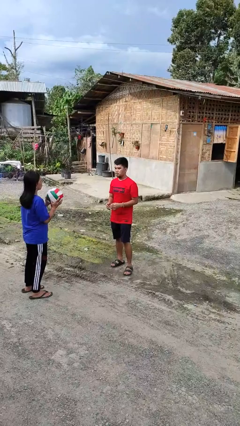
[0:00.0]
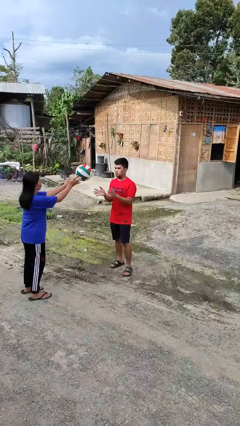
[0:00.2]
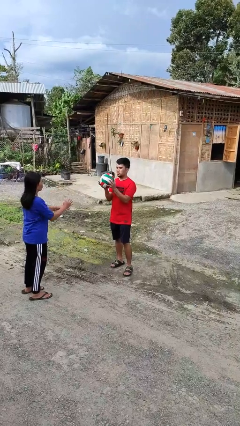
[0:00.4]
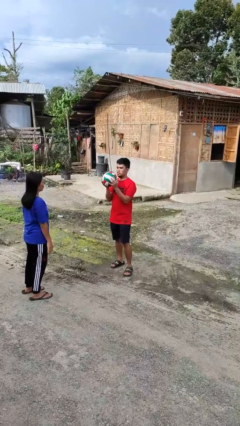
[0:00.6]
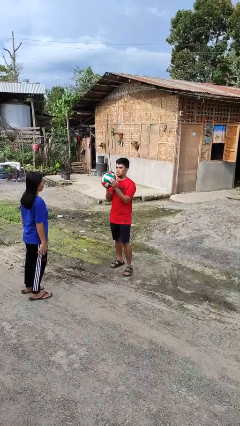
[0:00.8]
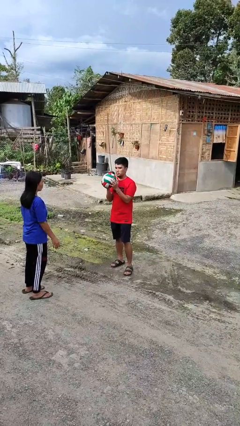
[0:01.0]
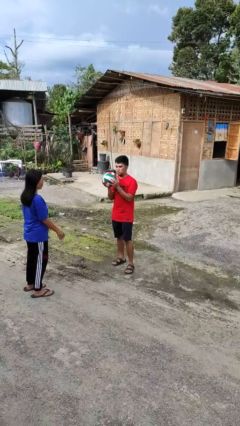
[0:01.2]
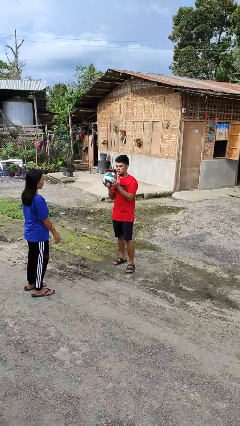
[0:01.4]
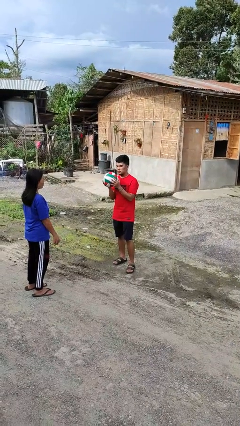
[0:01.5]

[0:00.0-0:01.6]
person catches object from person

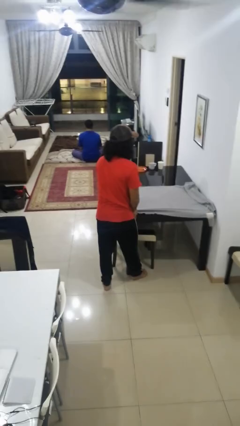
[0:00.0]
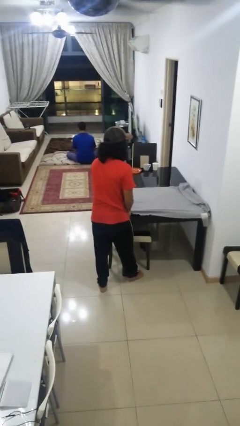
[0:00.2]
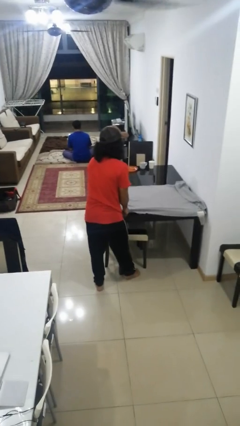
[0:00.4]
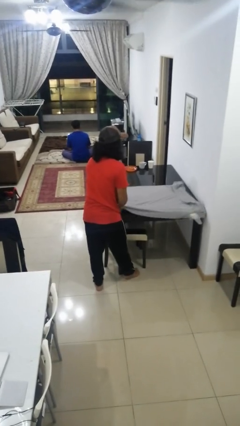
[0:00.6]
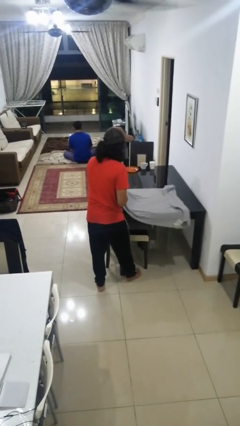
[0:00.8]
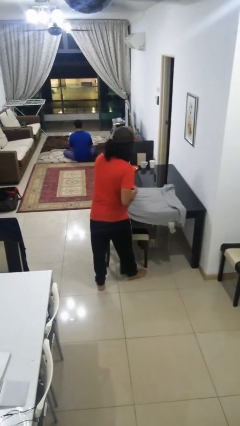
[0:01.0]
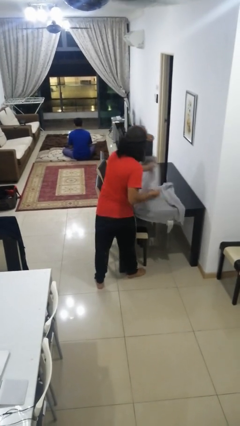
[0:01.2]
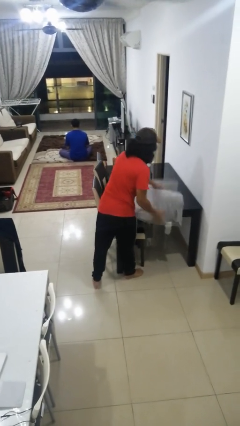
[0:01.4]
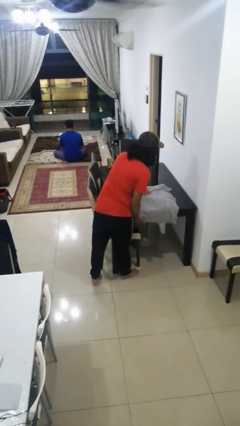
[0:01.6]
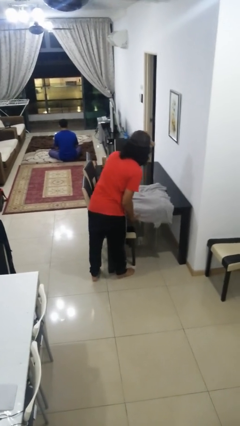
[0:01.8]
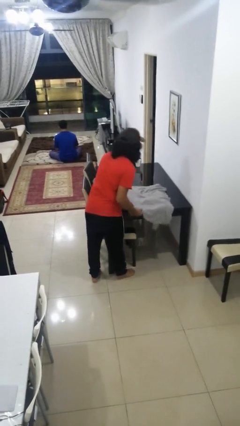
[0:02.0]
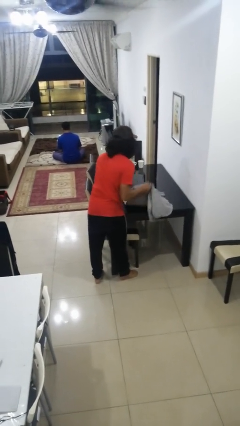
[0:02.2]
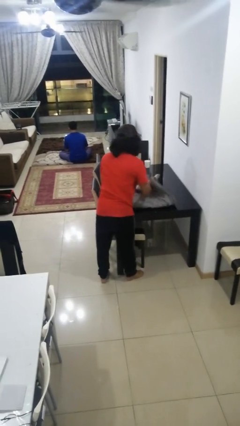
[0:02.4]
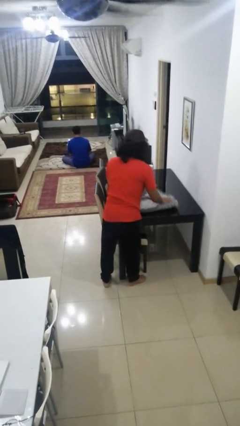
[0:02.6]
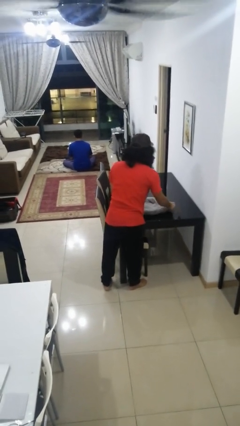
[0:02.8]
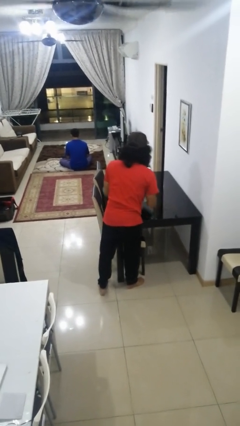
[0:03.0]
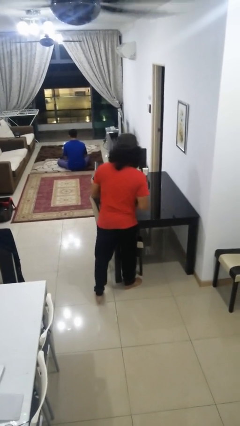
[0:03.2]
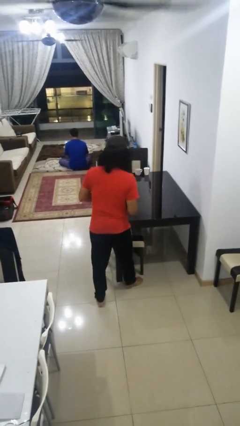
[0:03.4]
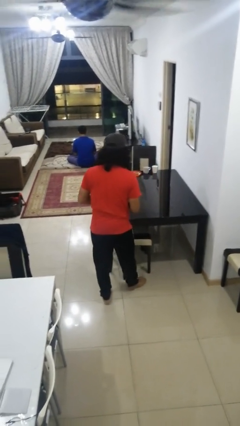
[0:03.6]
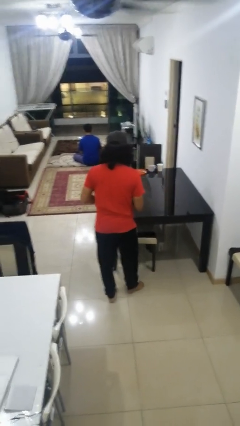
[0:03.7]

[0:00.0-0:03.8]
person folds tablecloth

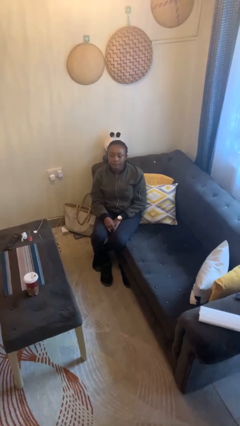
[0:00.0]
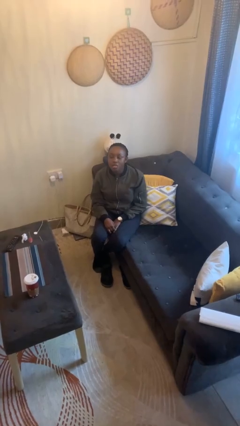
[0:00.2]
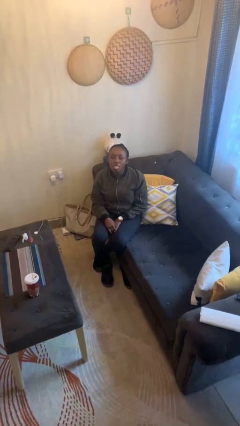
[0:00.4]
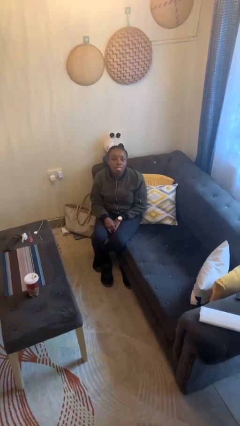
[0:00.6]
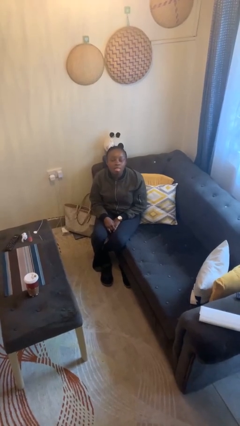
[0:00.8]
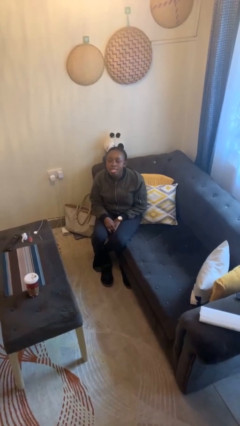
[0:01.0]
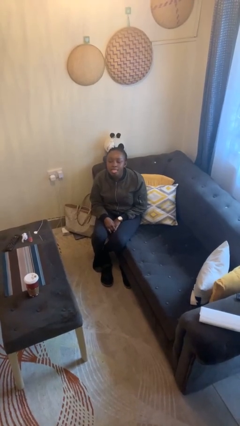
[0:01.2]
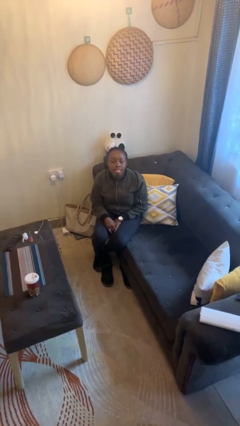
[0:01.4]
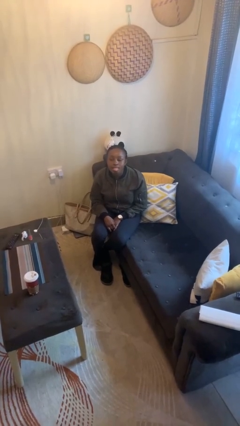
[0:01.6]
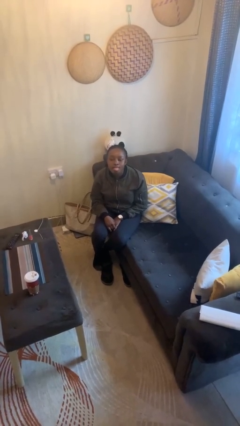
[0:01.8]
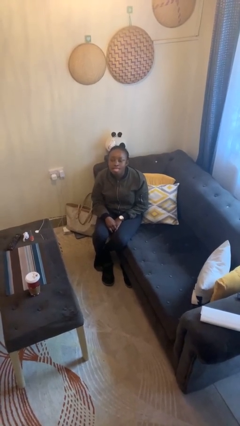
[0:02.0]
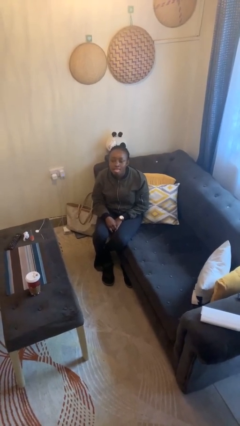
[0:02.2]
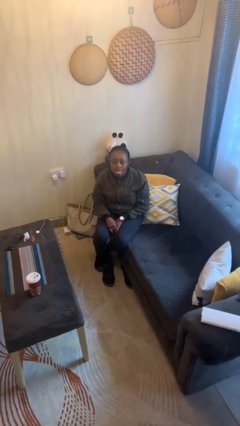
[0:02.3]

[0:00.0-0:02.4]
person sticks out tongue

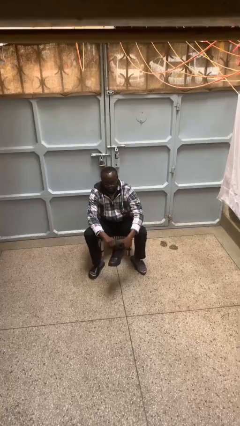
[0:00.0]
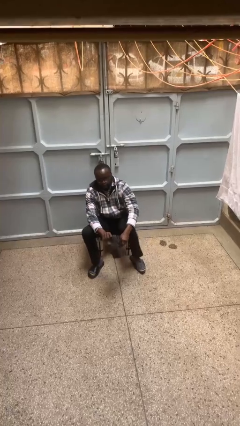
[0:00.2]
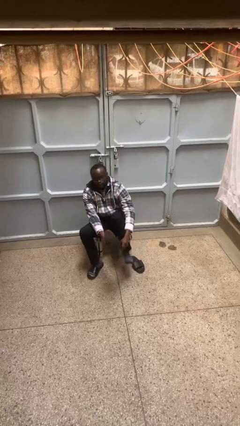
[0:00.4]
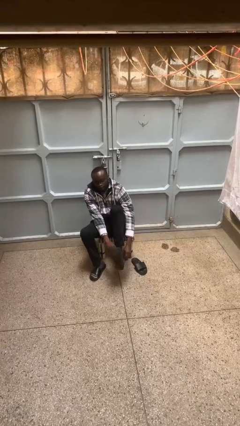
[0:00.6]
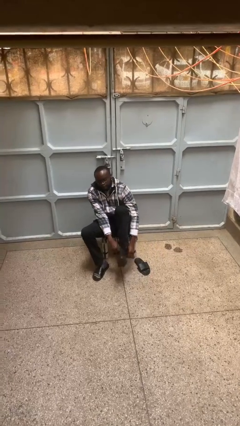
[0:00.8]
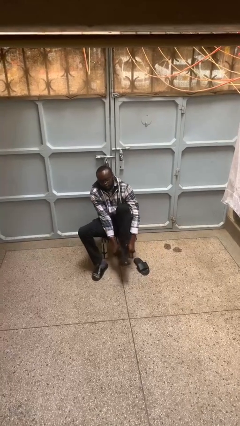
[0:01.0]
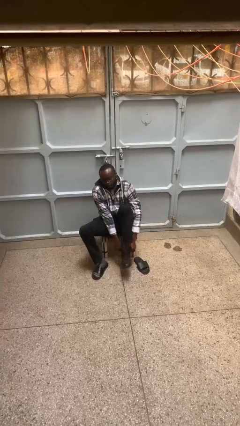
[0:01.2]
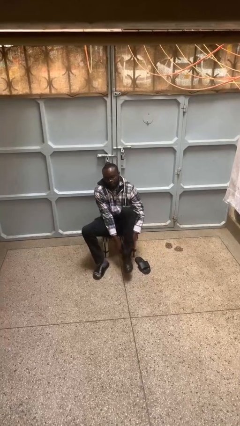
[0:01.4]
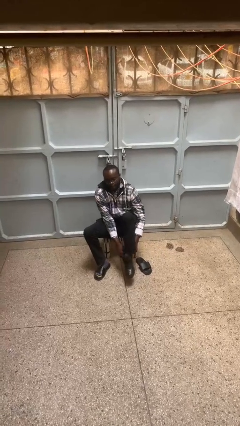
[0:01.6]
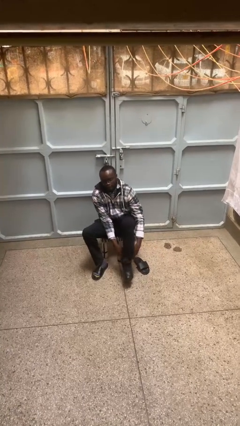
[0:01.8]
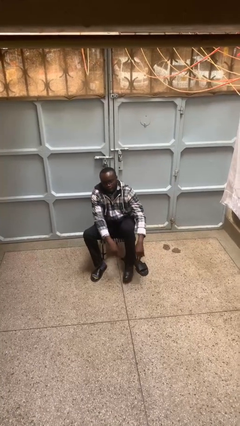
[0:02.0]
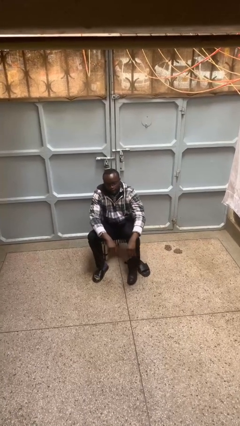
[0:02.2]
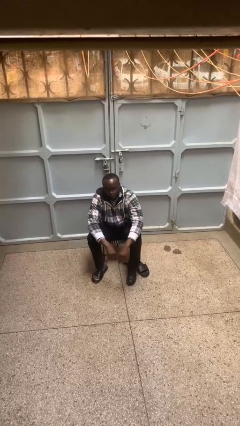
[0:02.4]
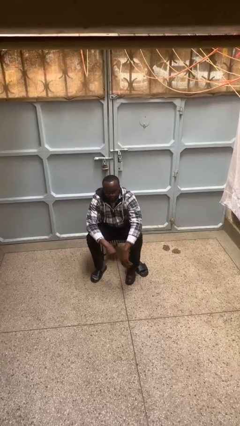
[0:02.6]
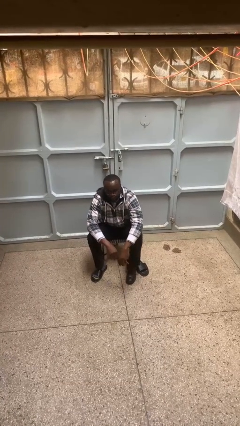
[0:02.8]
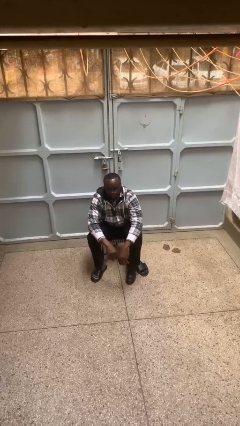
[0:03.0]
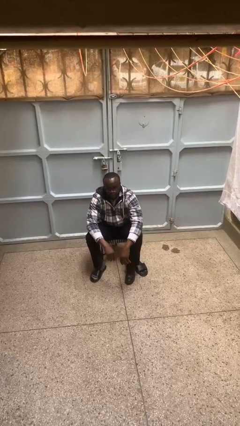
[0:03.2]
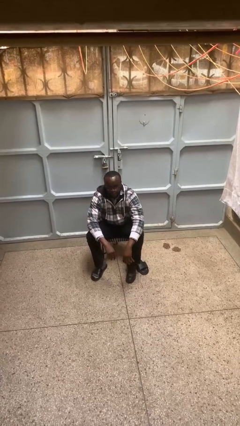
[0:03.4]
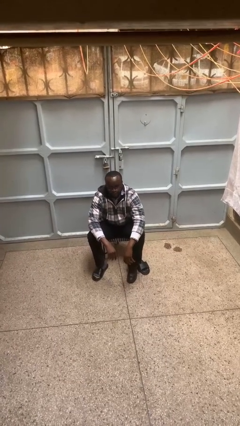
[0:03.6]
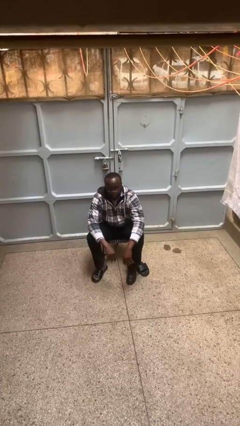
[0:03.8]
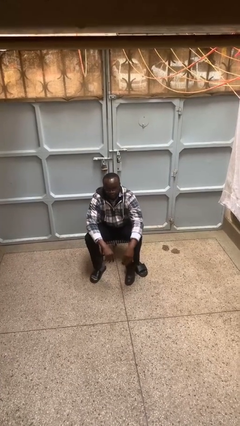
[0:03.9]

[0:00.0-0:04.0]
person puts on boots

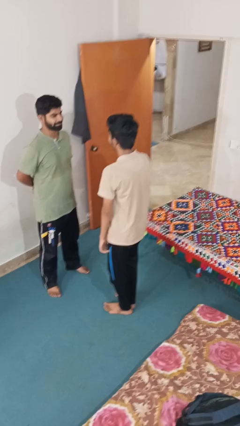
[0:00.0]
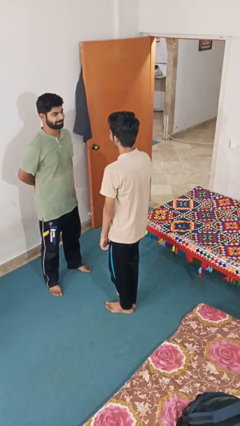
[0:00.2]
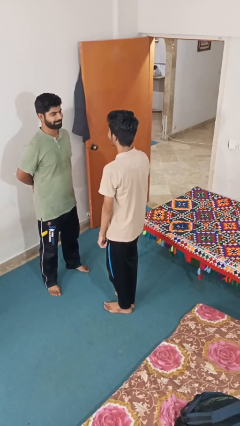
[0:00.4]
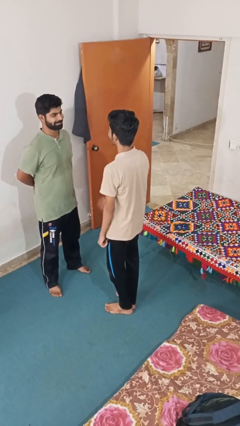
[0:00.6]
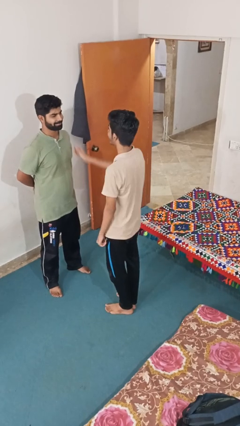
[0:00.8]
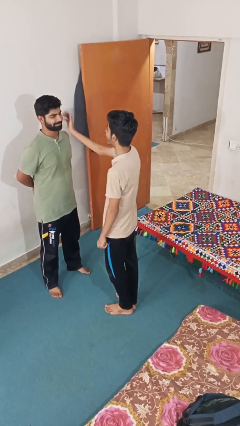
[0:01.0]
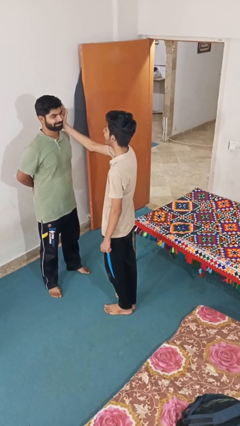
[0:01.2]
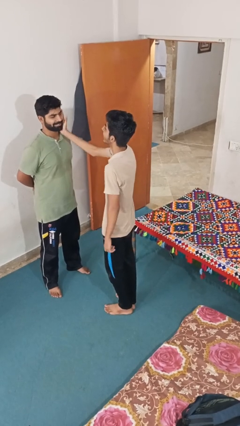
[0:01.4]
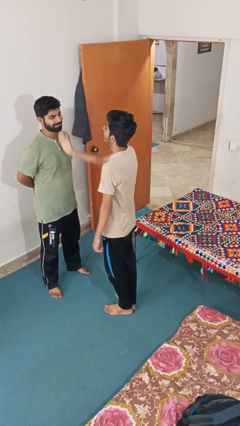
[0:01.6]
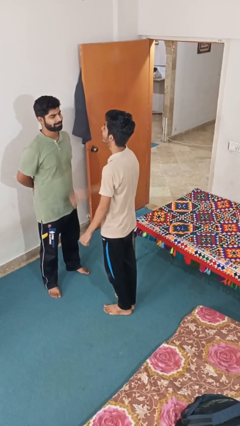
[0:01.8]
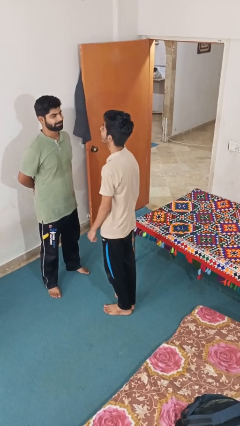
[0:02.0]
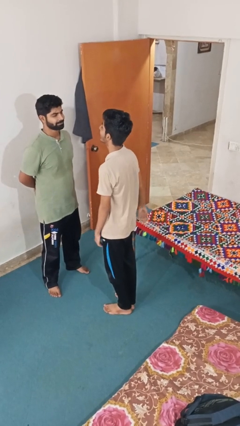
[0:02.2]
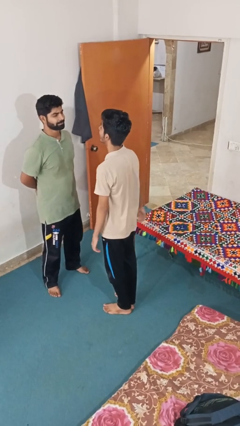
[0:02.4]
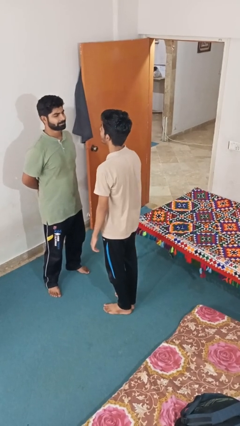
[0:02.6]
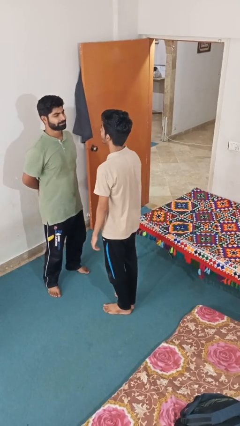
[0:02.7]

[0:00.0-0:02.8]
person touches face of person

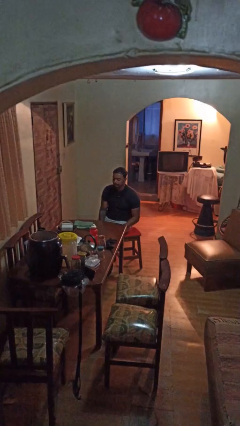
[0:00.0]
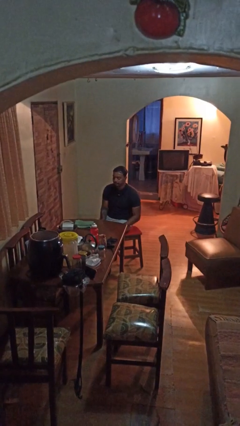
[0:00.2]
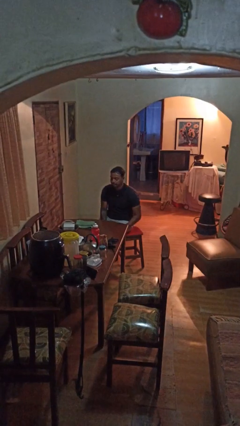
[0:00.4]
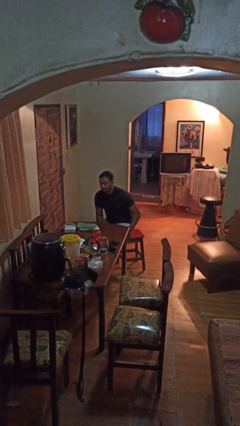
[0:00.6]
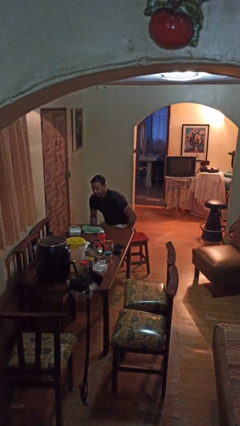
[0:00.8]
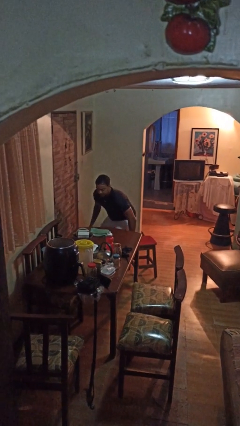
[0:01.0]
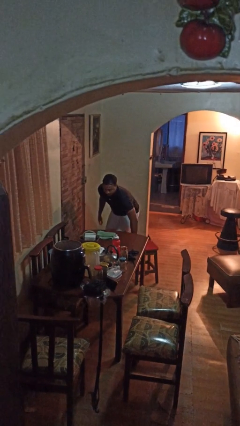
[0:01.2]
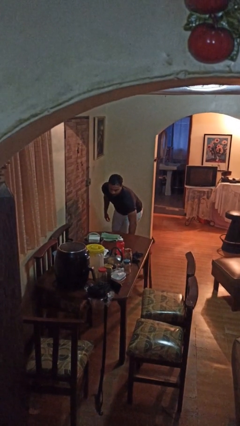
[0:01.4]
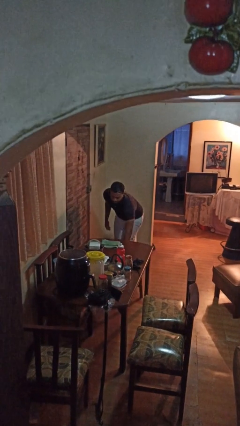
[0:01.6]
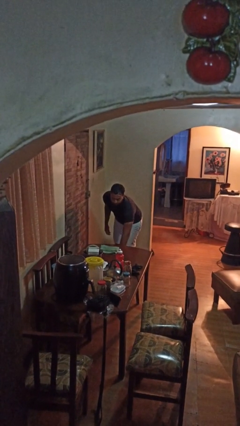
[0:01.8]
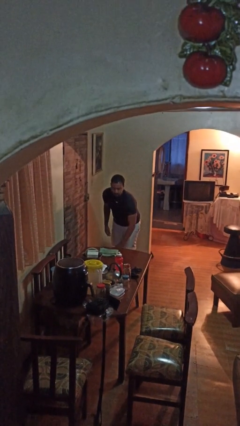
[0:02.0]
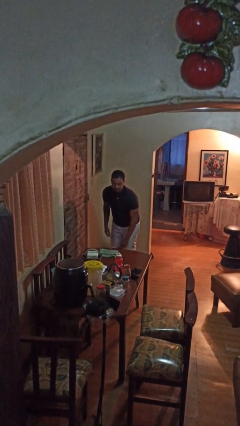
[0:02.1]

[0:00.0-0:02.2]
person stands up

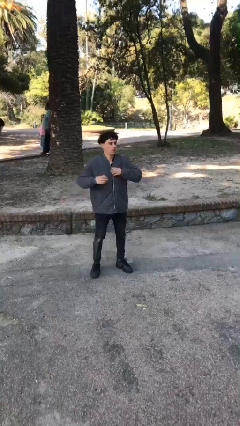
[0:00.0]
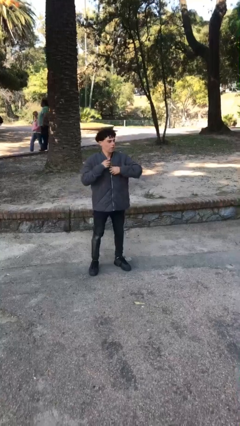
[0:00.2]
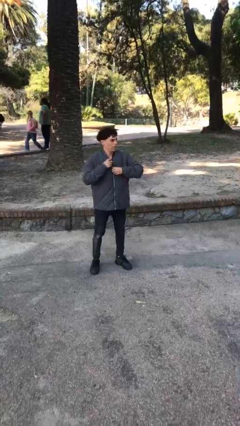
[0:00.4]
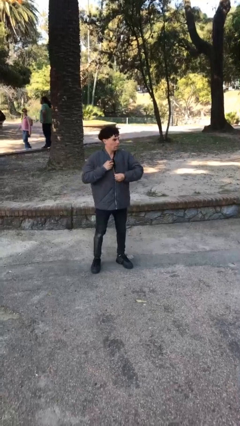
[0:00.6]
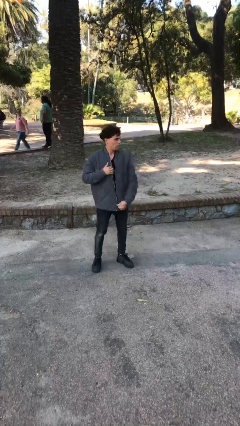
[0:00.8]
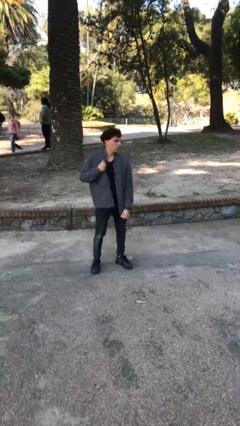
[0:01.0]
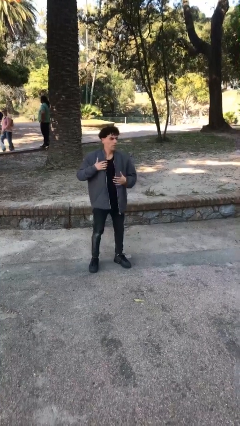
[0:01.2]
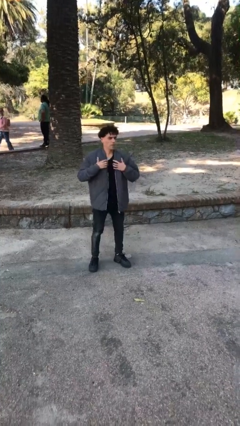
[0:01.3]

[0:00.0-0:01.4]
person unzips jacket
